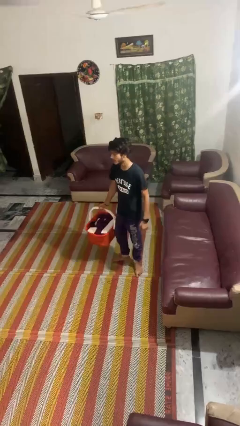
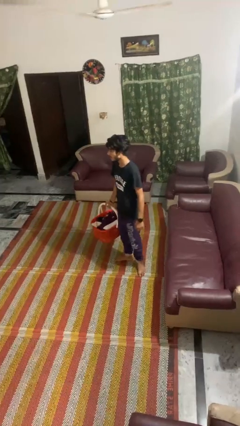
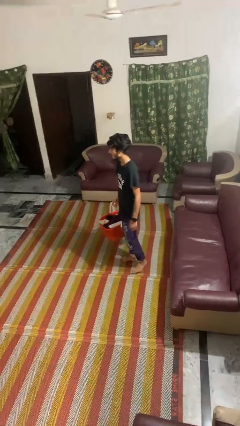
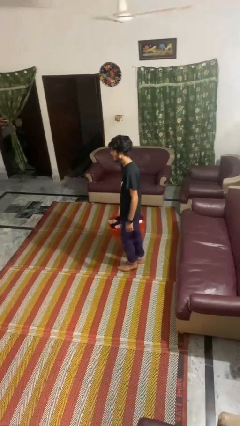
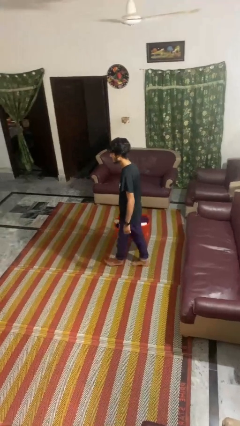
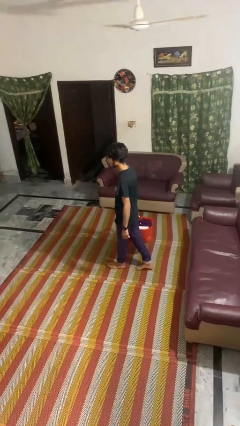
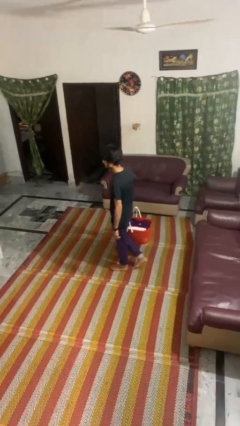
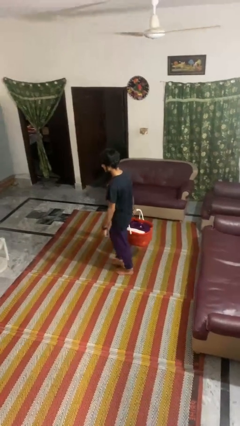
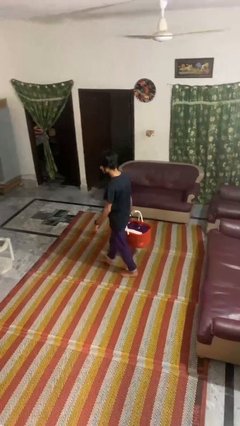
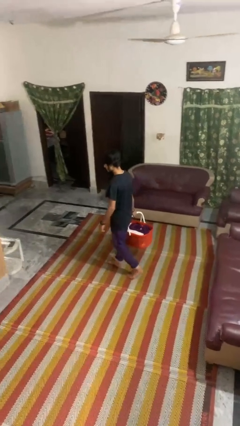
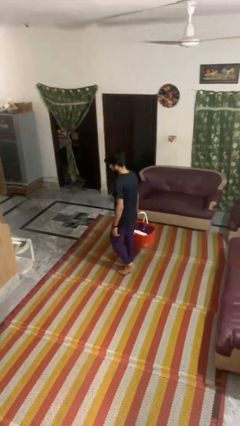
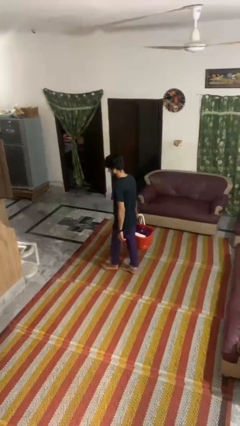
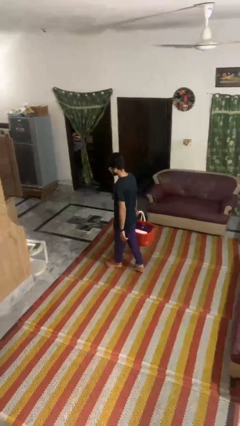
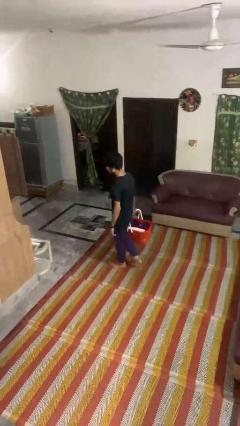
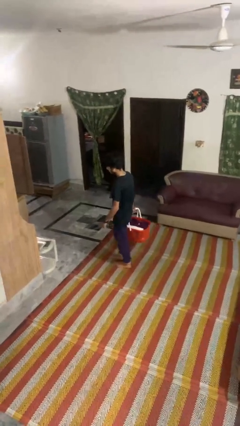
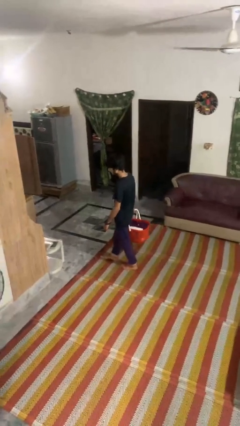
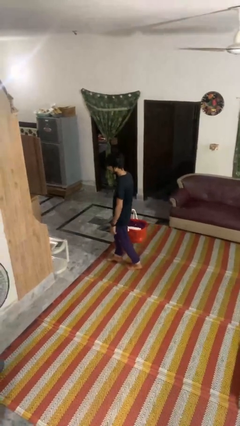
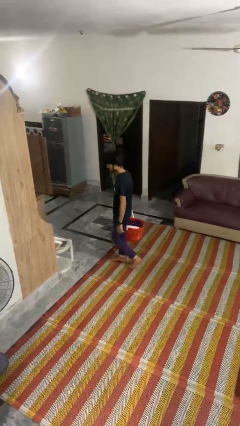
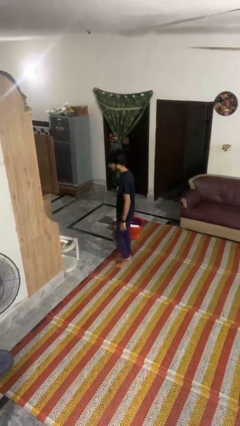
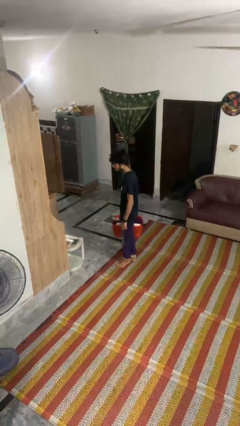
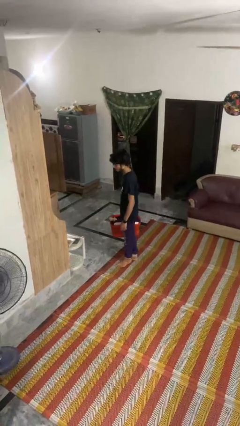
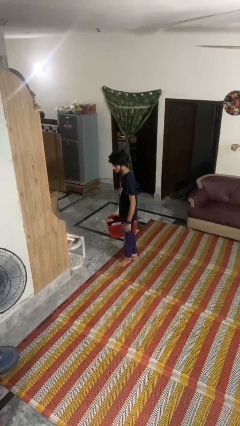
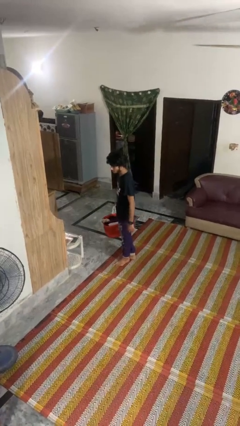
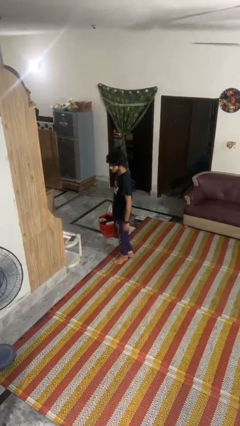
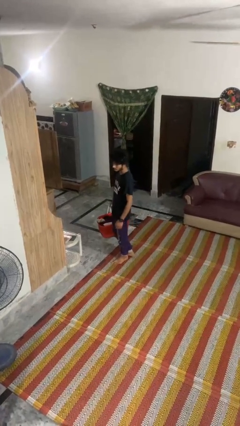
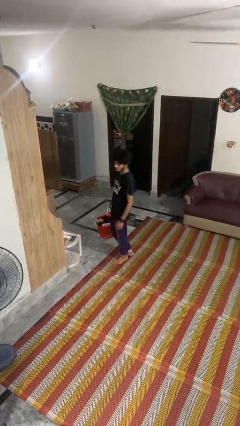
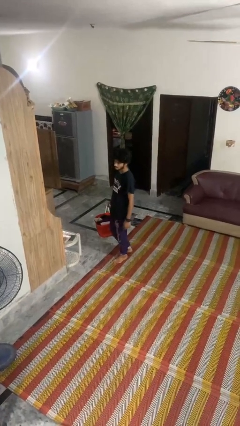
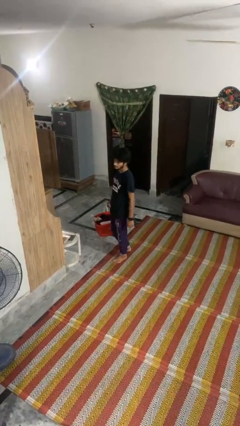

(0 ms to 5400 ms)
person carries laundry basket

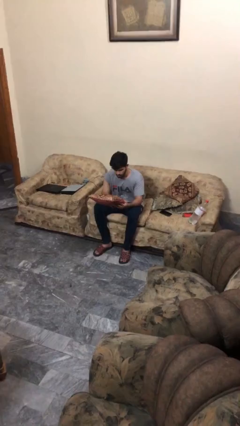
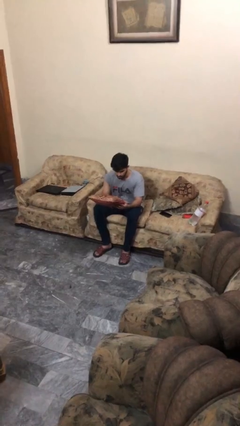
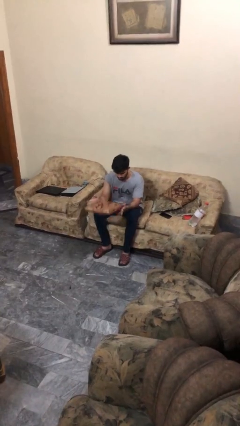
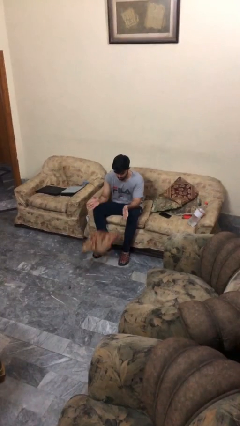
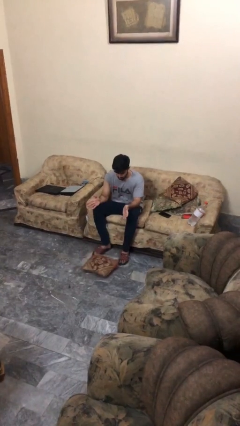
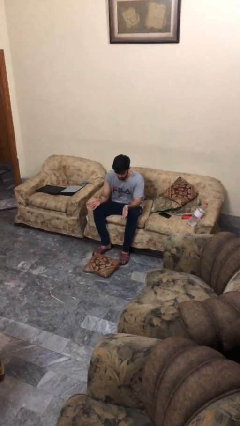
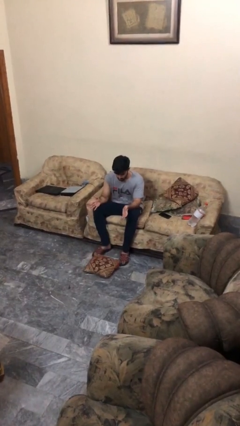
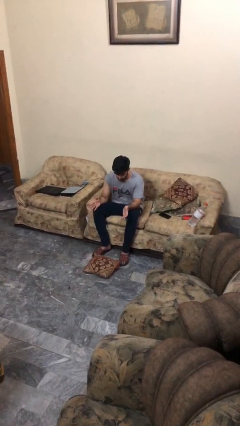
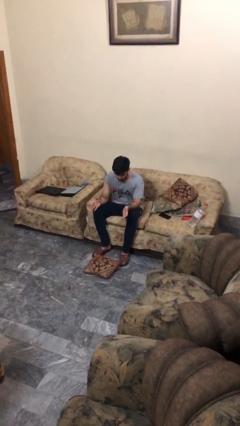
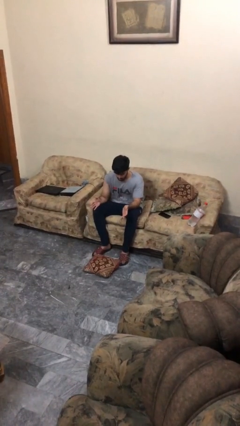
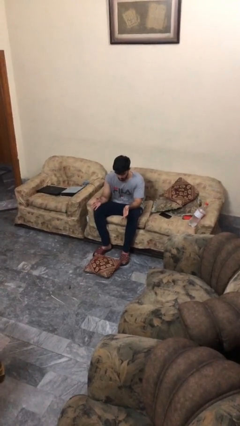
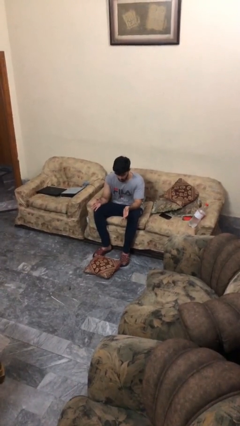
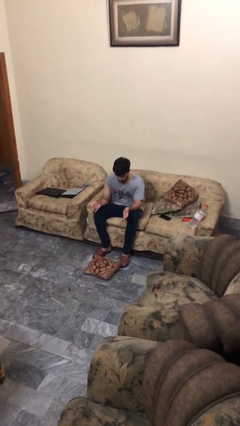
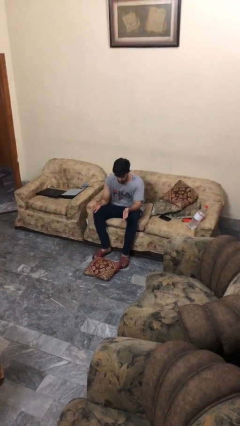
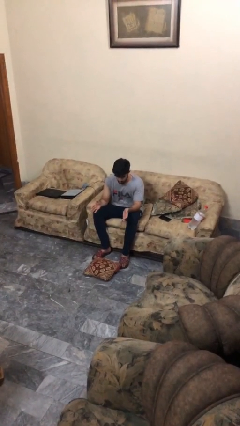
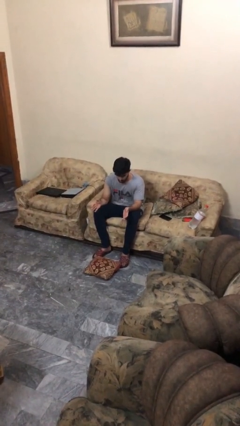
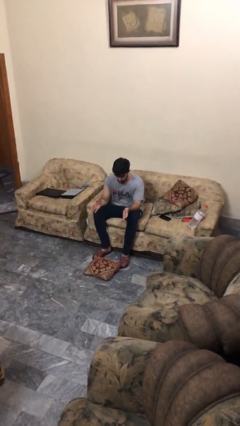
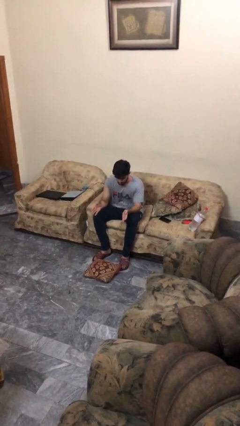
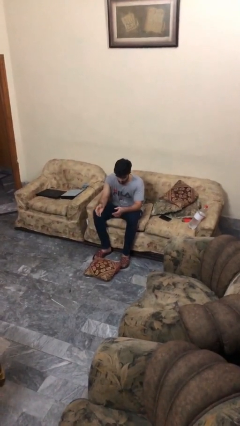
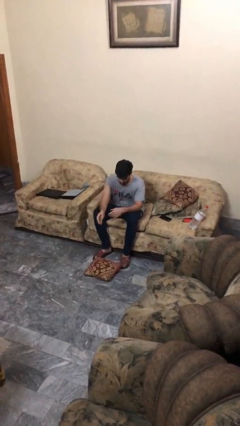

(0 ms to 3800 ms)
person drops object

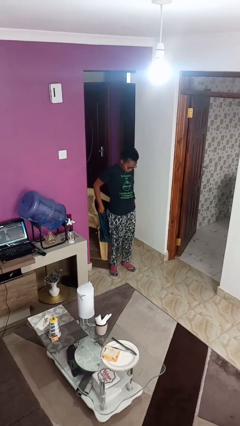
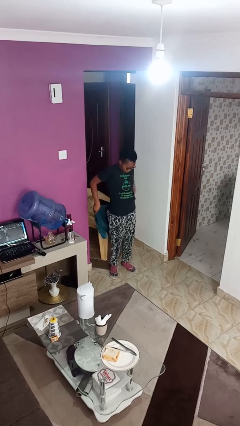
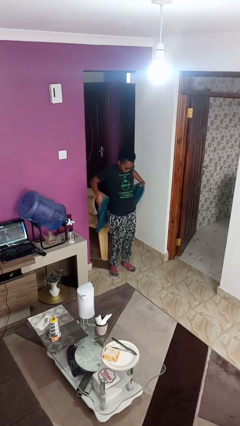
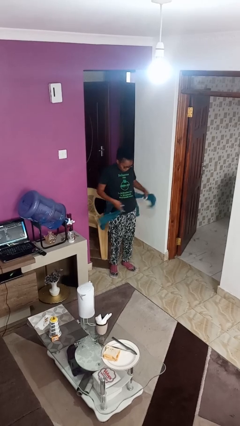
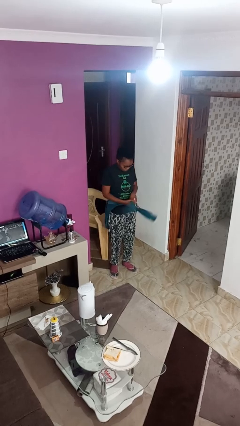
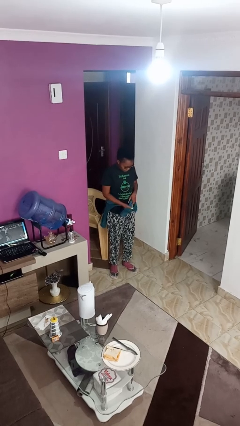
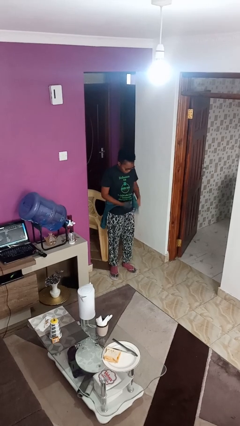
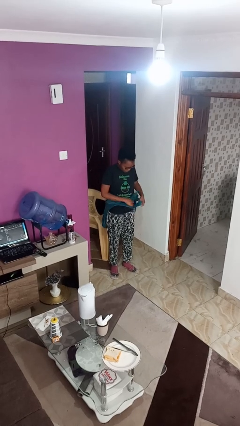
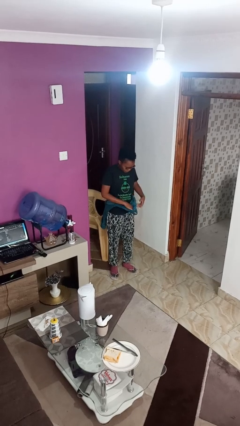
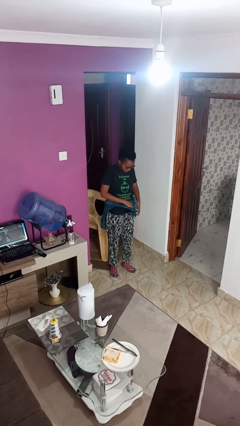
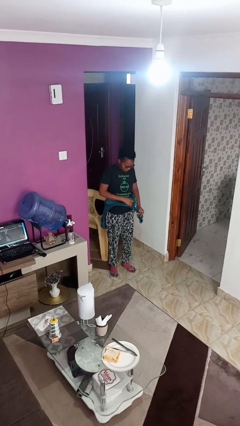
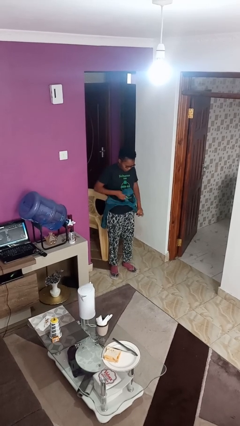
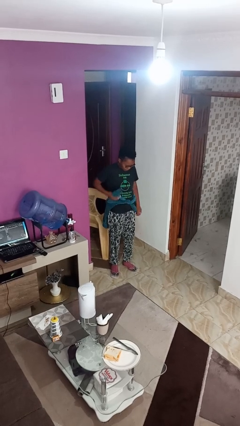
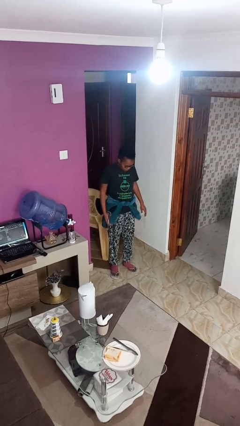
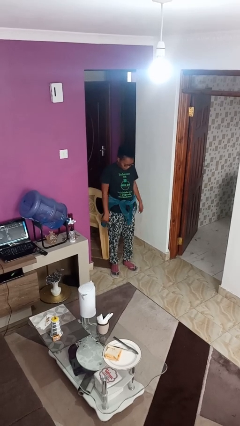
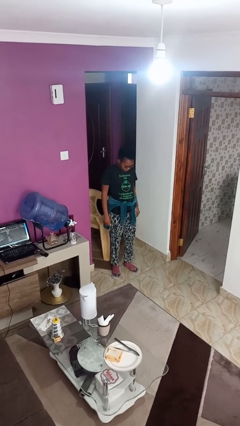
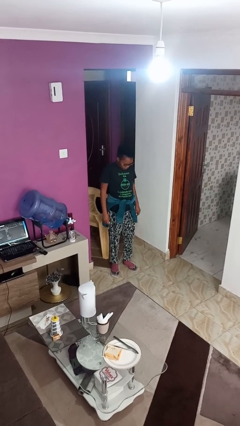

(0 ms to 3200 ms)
person ties jacket around waist

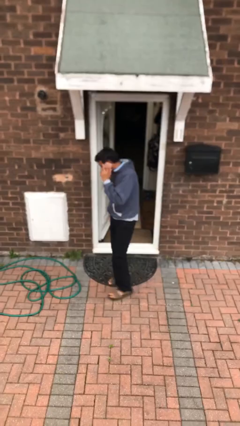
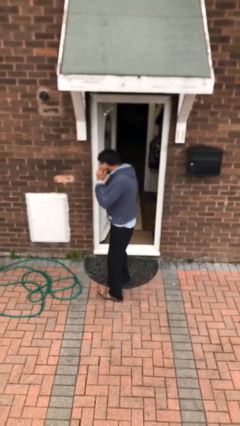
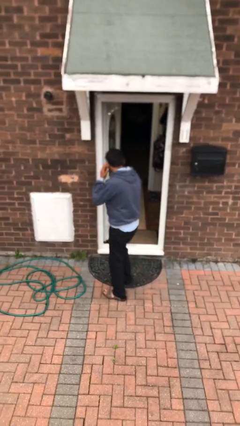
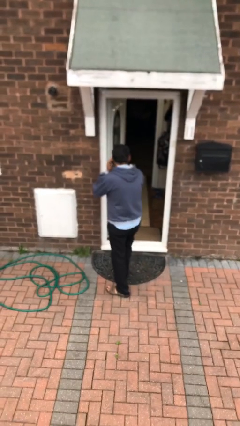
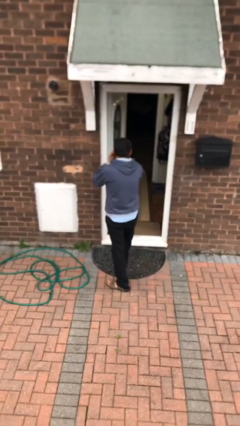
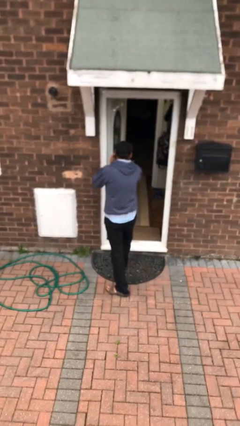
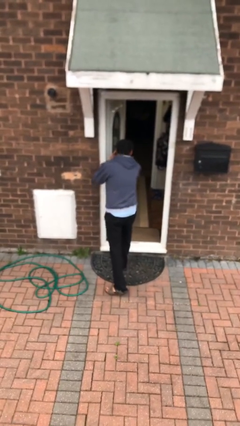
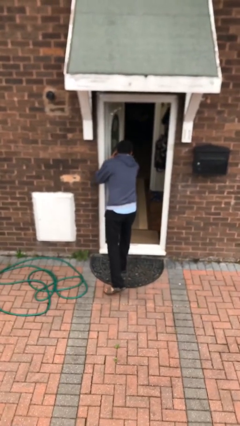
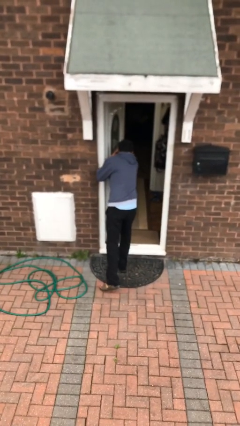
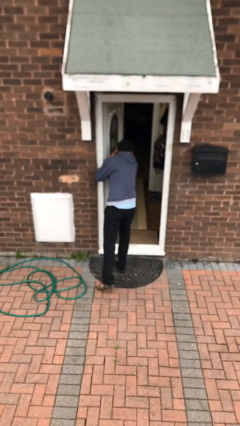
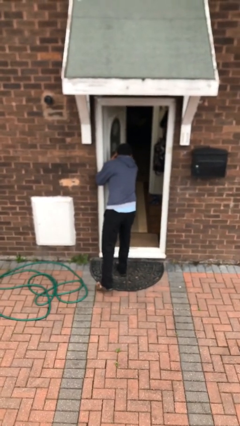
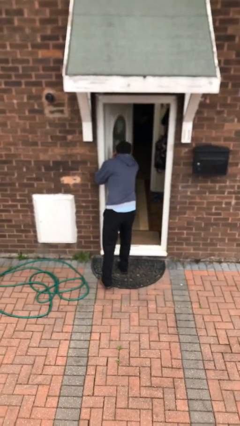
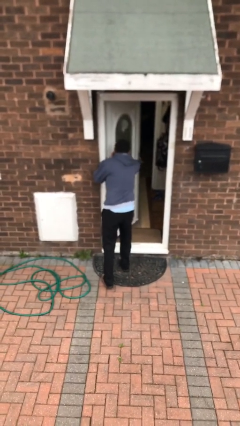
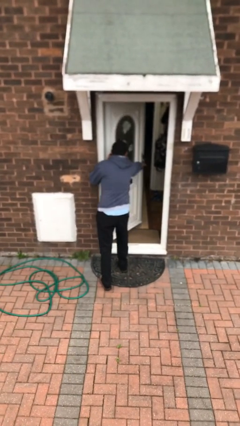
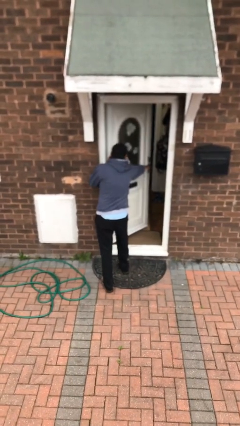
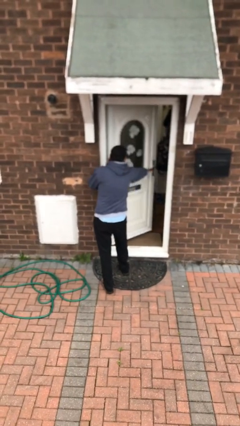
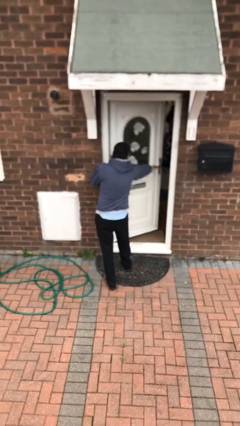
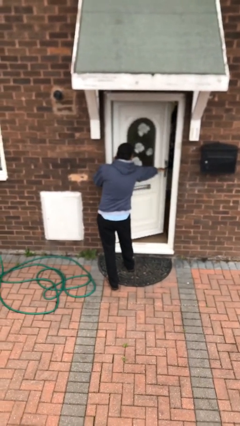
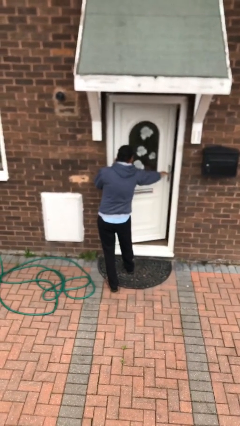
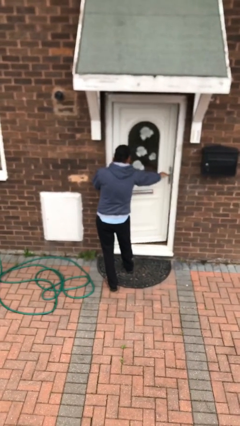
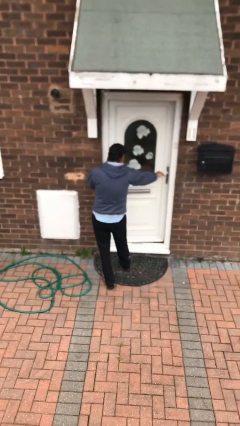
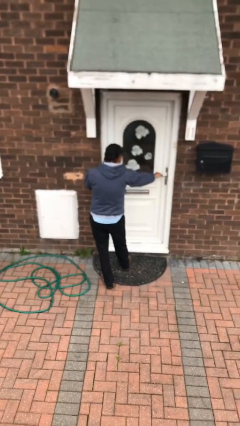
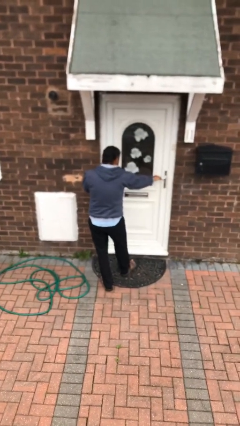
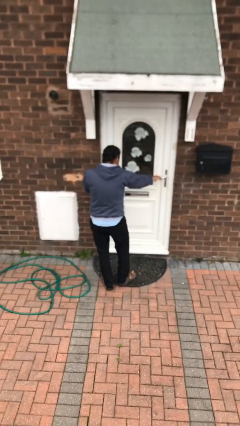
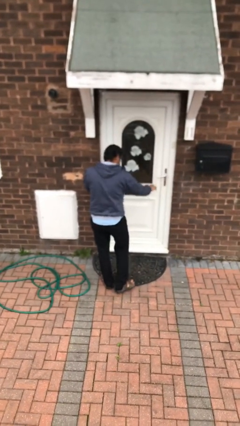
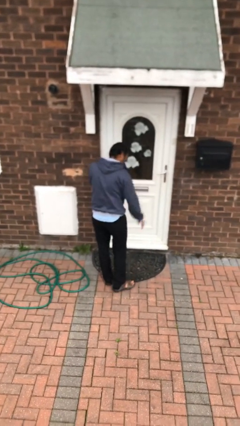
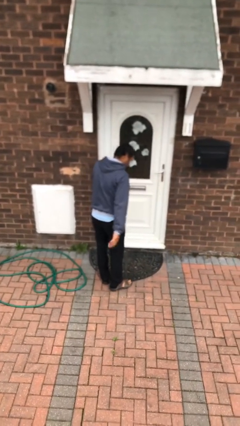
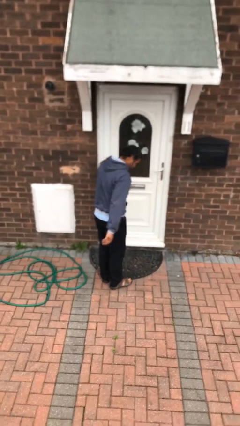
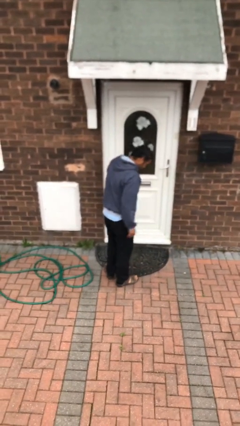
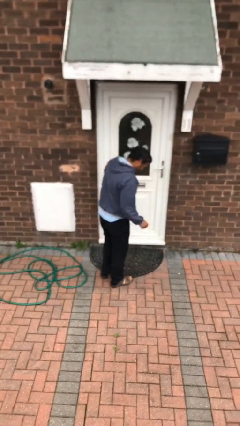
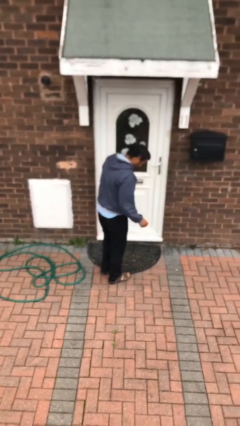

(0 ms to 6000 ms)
person closes facility door
